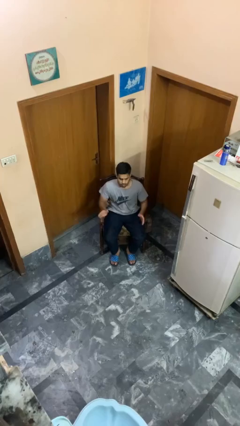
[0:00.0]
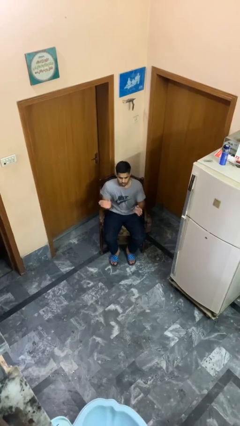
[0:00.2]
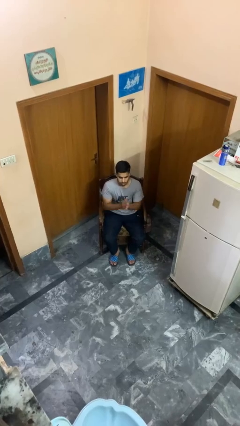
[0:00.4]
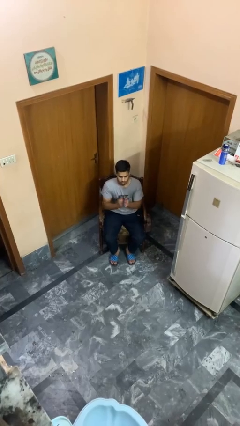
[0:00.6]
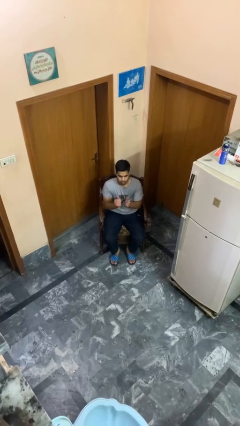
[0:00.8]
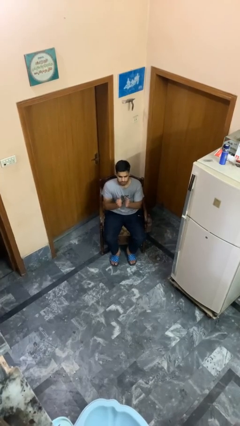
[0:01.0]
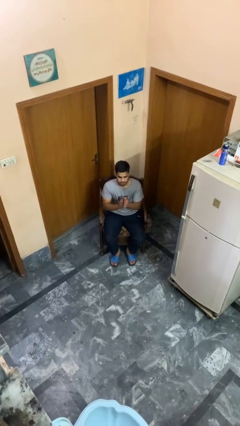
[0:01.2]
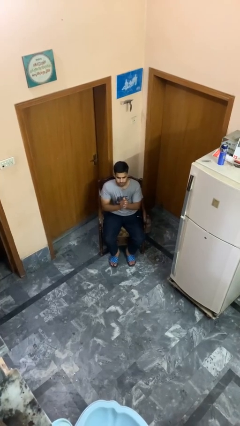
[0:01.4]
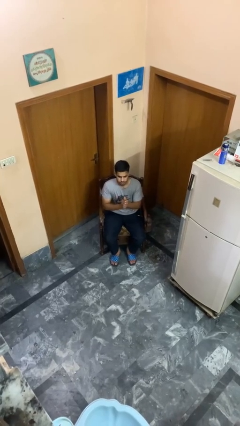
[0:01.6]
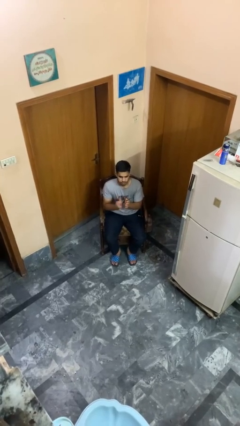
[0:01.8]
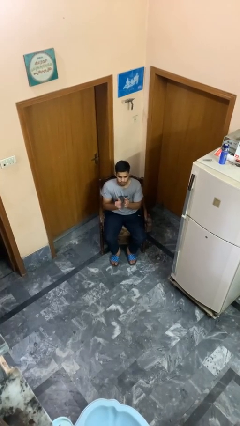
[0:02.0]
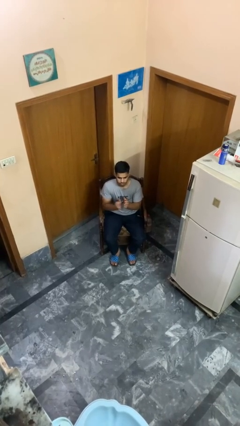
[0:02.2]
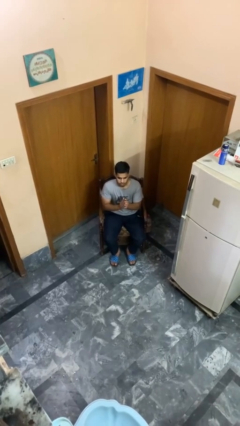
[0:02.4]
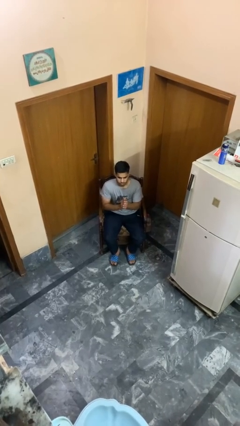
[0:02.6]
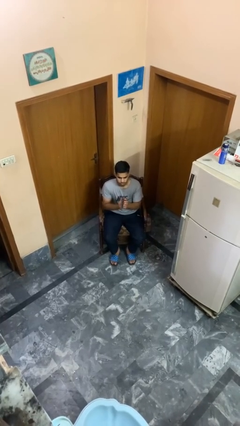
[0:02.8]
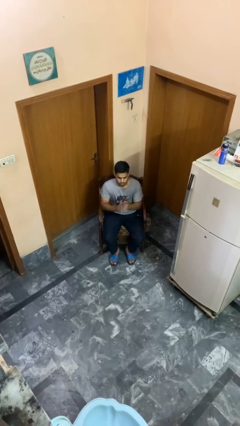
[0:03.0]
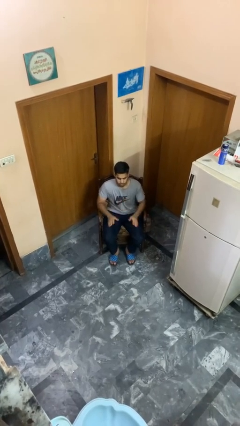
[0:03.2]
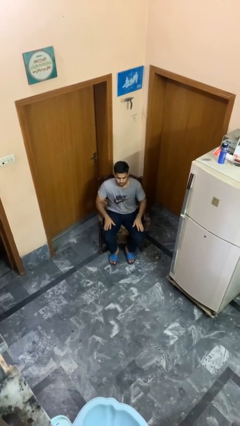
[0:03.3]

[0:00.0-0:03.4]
person claps hands

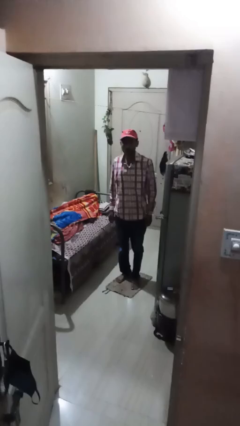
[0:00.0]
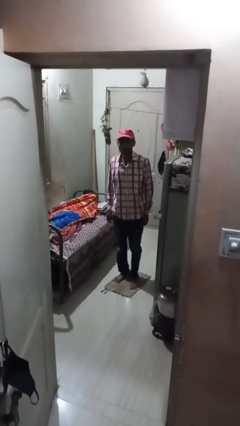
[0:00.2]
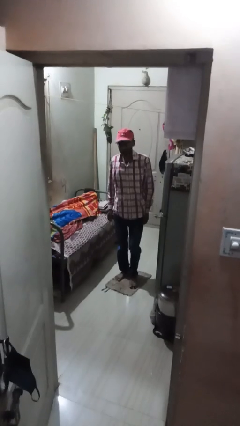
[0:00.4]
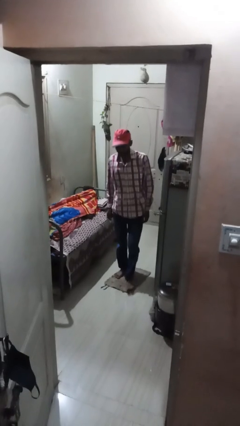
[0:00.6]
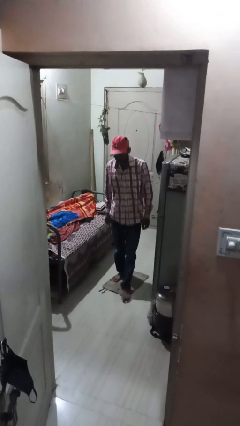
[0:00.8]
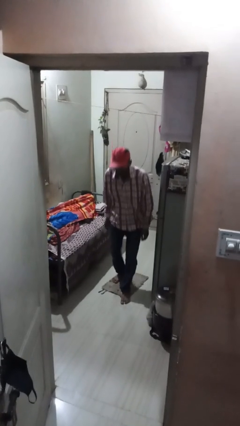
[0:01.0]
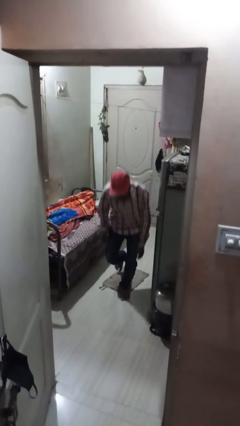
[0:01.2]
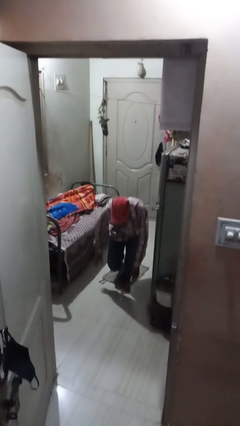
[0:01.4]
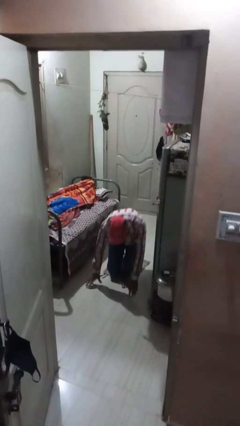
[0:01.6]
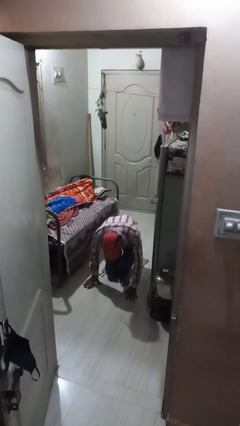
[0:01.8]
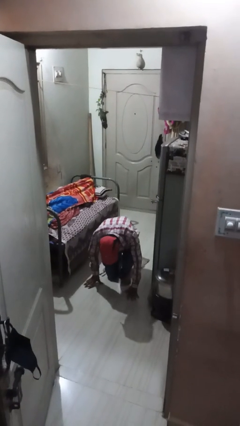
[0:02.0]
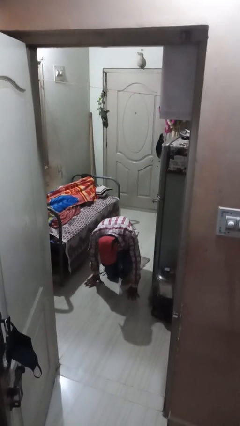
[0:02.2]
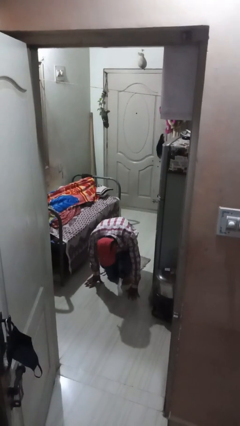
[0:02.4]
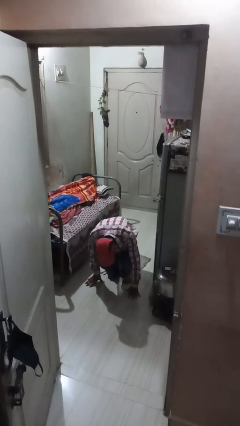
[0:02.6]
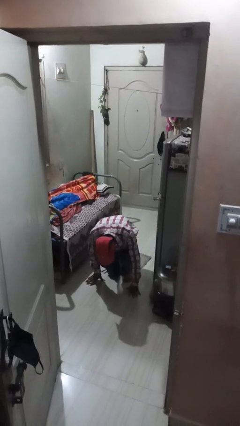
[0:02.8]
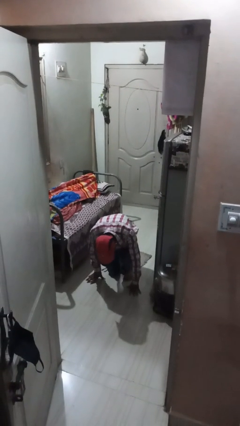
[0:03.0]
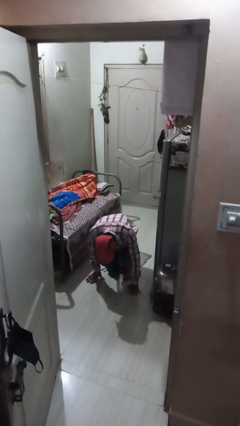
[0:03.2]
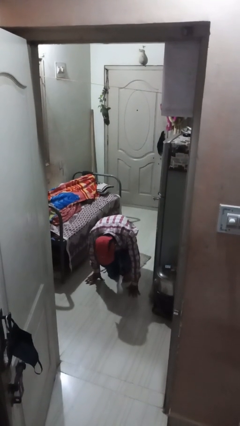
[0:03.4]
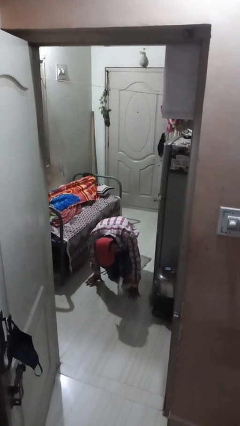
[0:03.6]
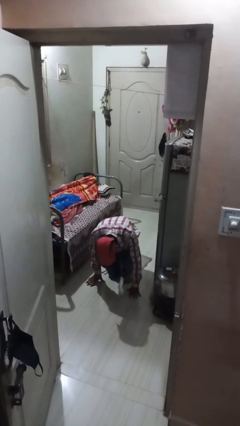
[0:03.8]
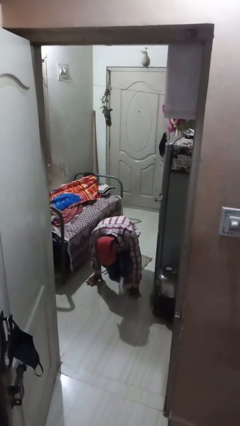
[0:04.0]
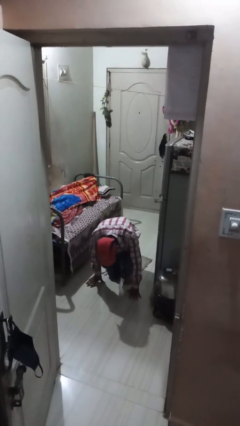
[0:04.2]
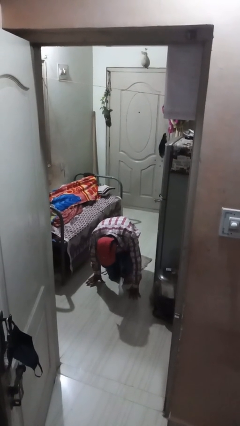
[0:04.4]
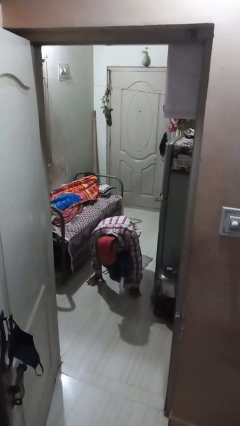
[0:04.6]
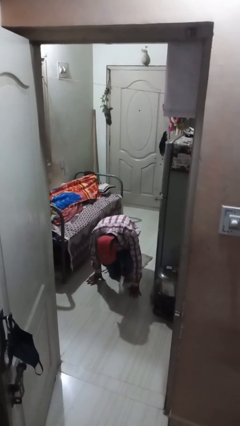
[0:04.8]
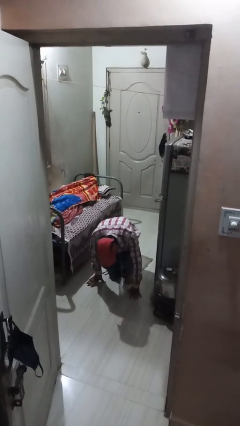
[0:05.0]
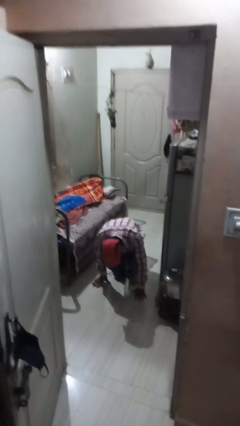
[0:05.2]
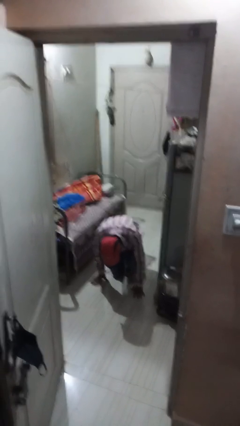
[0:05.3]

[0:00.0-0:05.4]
person kneels

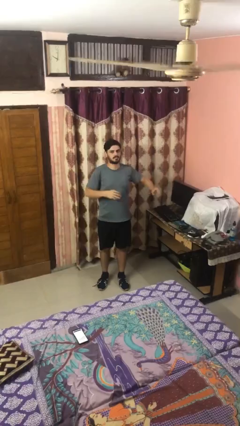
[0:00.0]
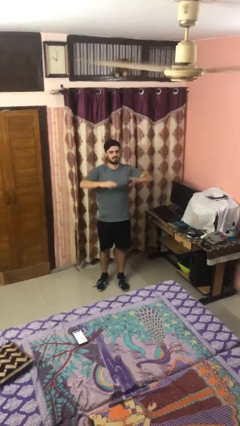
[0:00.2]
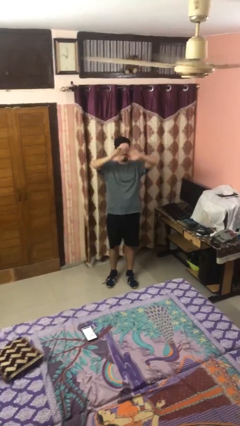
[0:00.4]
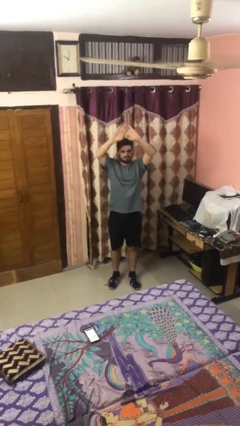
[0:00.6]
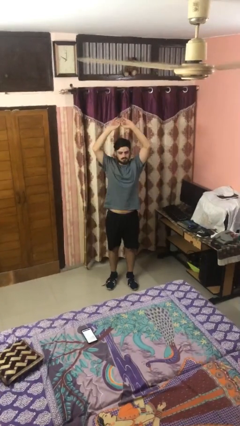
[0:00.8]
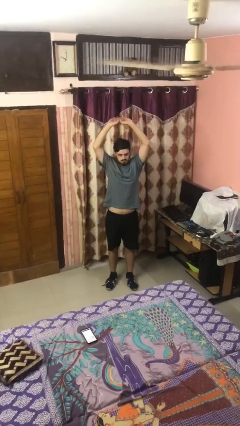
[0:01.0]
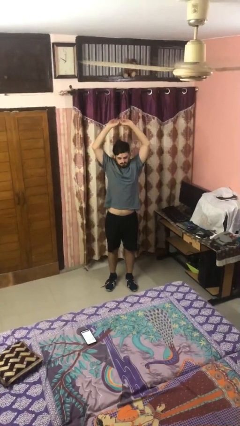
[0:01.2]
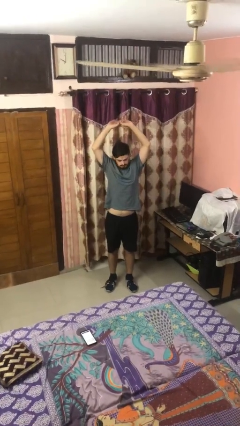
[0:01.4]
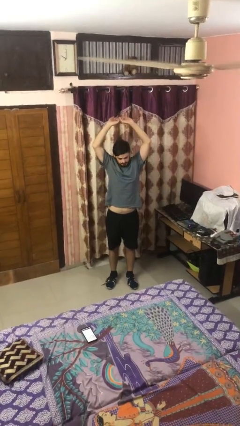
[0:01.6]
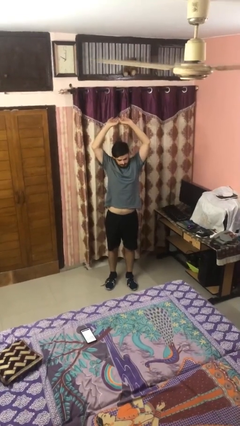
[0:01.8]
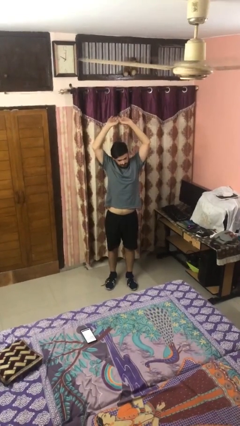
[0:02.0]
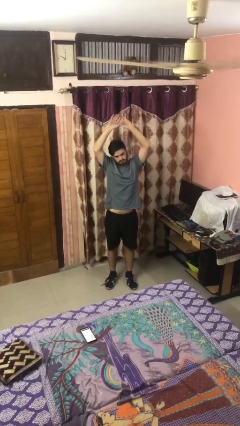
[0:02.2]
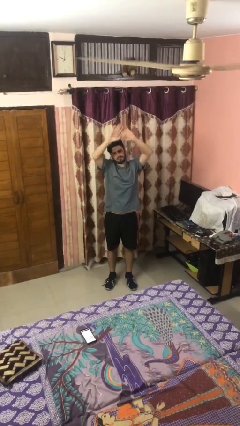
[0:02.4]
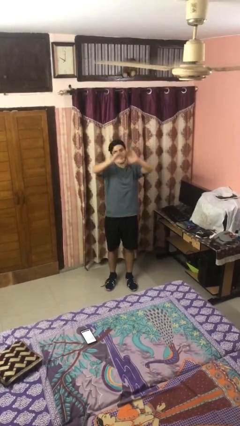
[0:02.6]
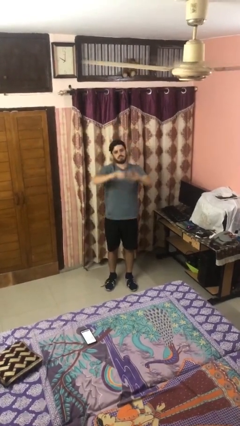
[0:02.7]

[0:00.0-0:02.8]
person stretches arms over head

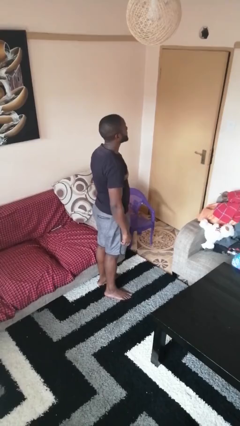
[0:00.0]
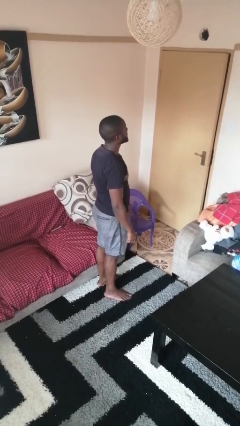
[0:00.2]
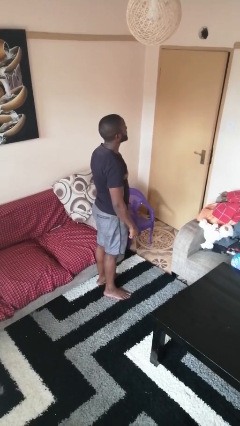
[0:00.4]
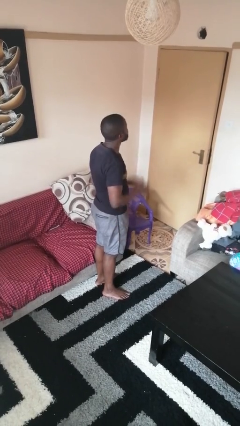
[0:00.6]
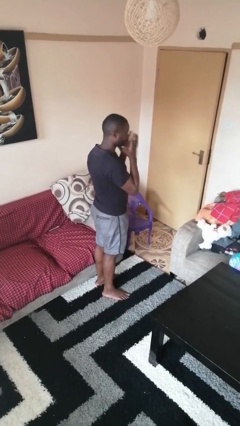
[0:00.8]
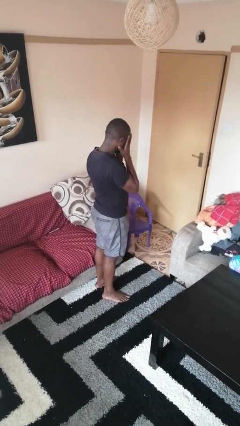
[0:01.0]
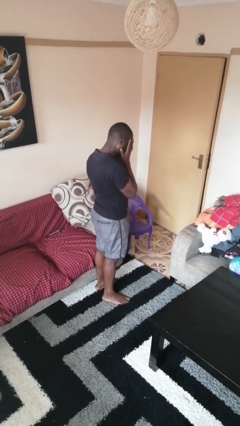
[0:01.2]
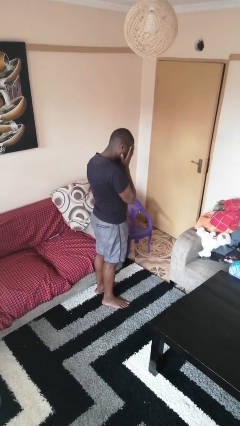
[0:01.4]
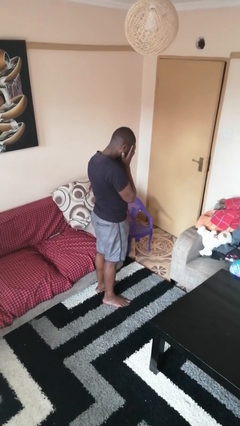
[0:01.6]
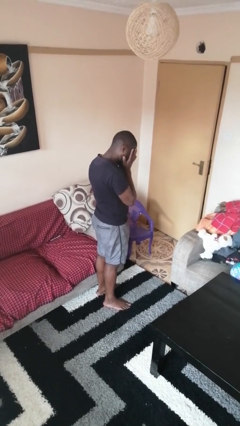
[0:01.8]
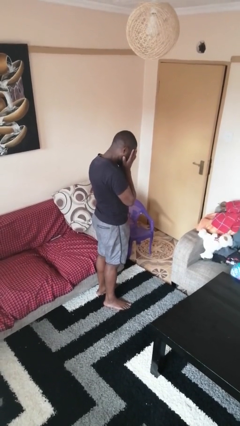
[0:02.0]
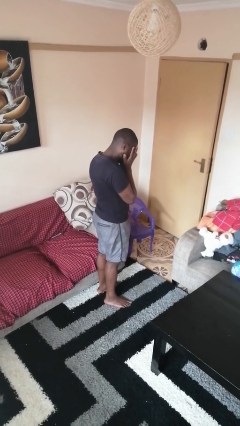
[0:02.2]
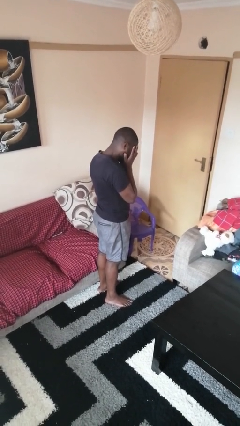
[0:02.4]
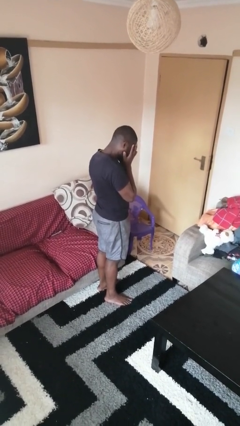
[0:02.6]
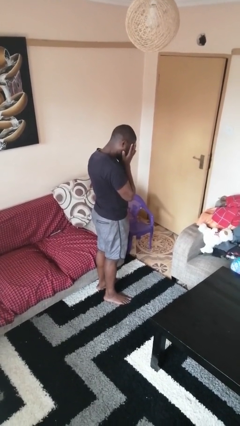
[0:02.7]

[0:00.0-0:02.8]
person covers face with hands

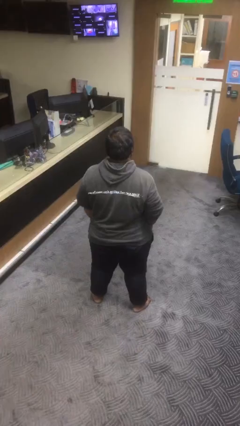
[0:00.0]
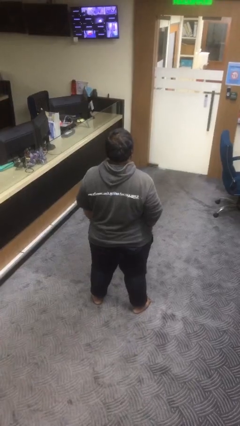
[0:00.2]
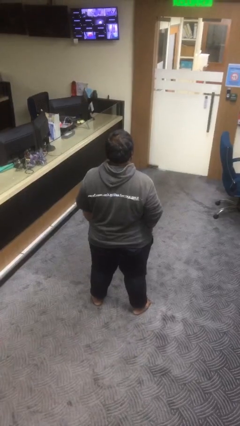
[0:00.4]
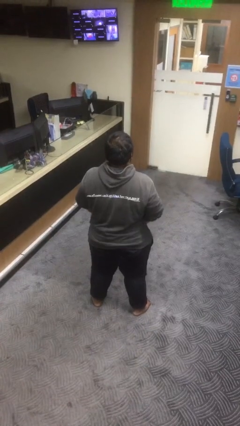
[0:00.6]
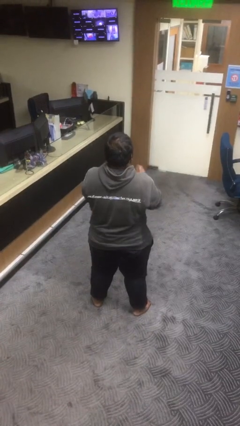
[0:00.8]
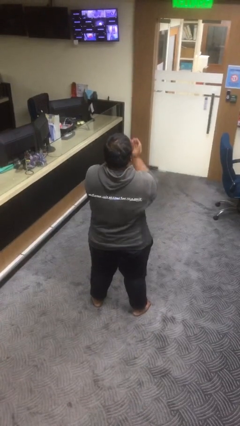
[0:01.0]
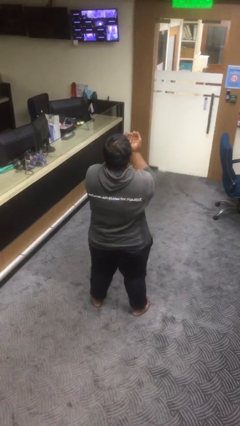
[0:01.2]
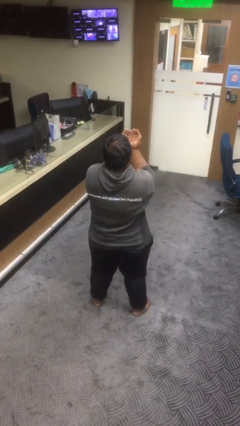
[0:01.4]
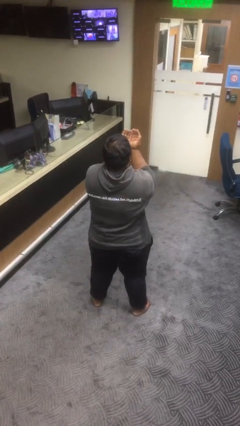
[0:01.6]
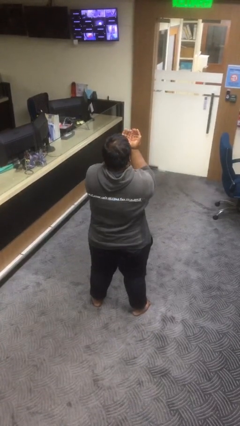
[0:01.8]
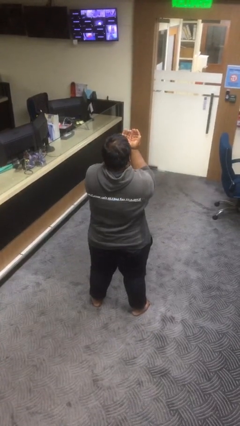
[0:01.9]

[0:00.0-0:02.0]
person prays

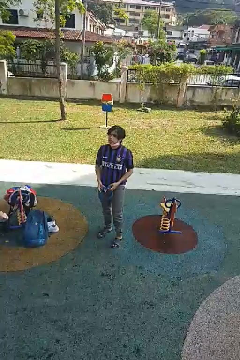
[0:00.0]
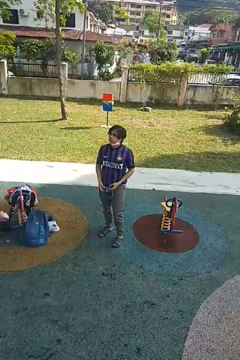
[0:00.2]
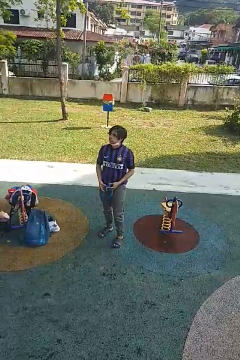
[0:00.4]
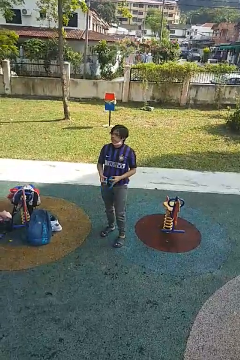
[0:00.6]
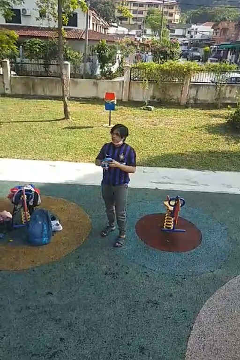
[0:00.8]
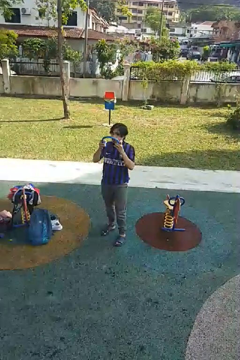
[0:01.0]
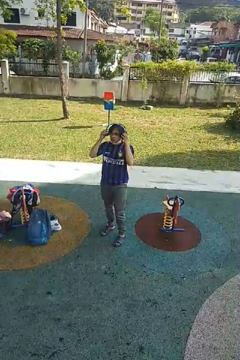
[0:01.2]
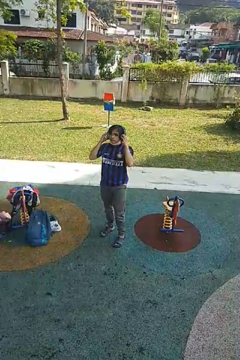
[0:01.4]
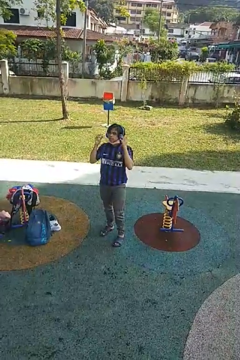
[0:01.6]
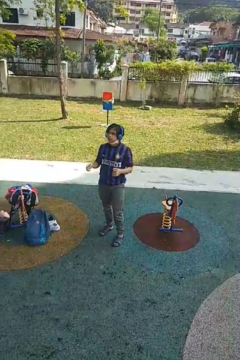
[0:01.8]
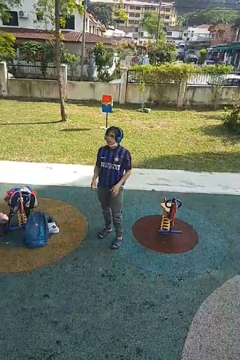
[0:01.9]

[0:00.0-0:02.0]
person puts on headphones
